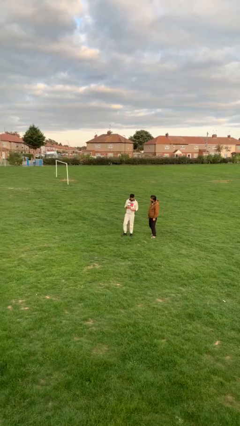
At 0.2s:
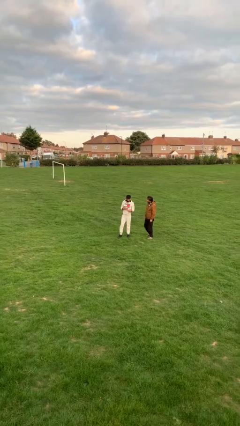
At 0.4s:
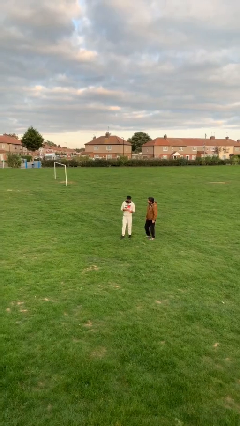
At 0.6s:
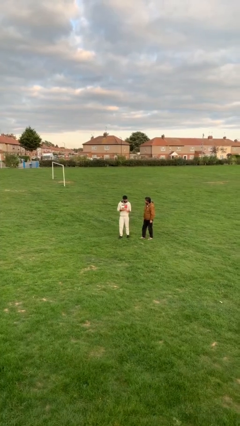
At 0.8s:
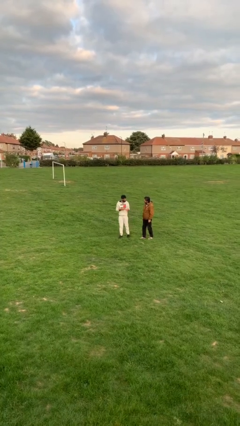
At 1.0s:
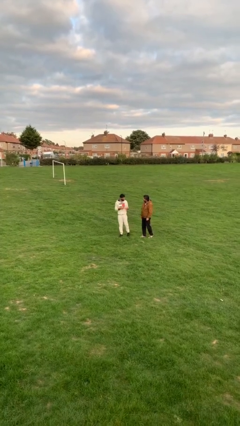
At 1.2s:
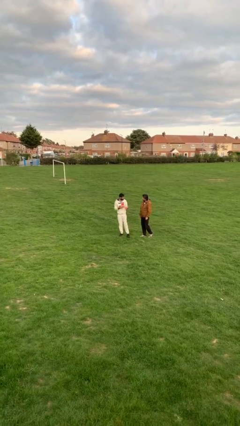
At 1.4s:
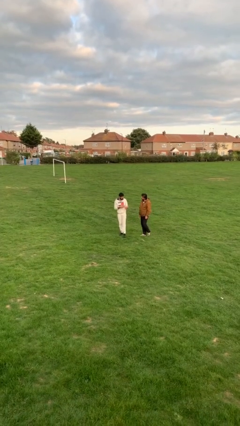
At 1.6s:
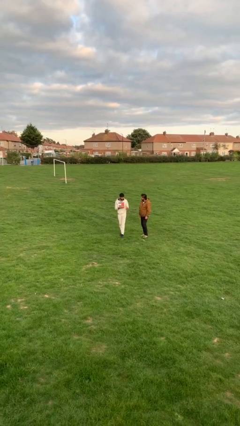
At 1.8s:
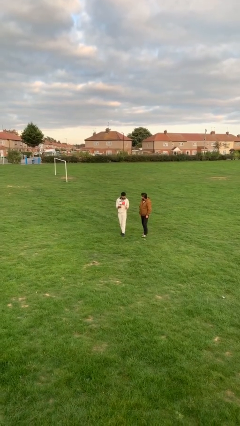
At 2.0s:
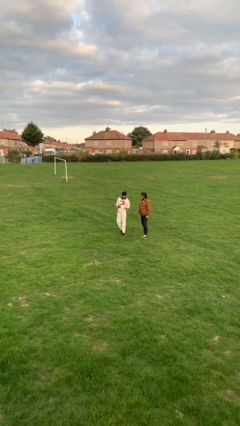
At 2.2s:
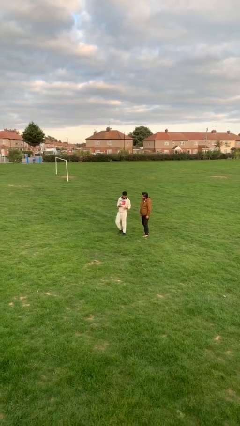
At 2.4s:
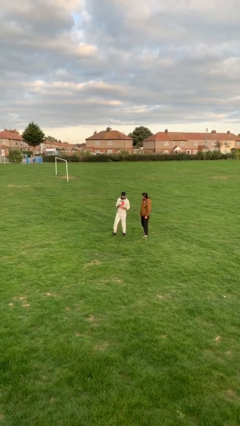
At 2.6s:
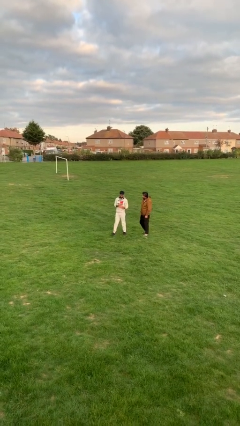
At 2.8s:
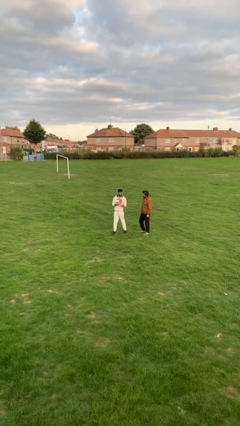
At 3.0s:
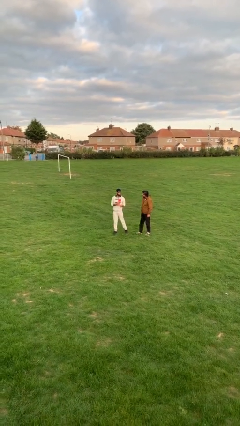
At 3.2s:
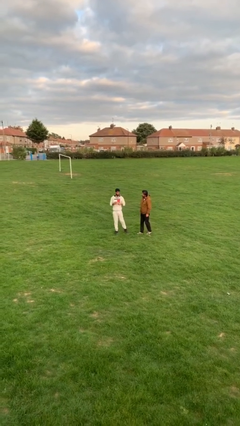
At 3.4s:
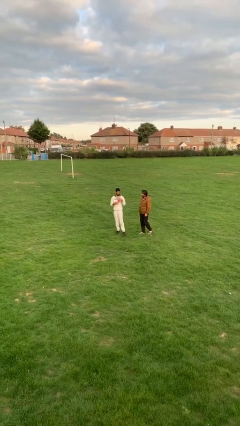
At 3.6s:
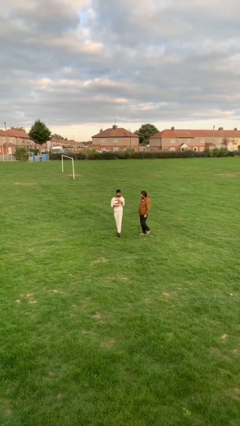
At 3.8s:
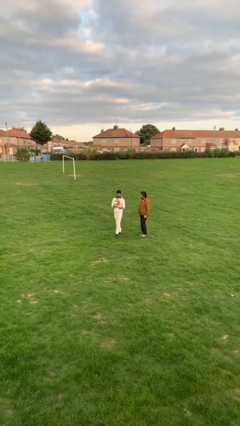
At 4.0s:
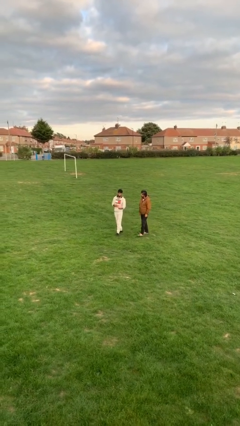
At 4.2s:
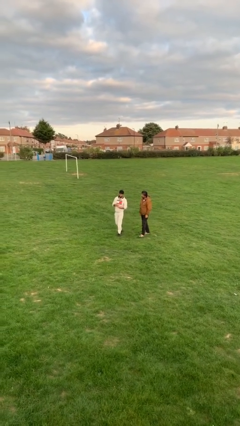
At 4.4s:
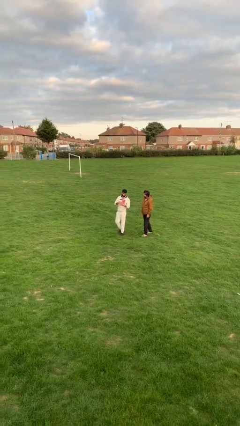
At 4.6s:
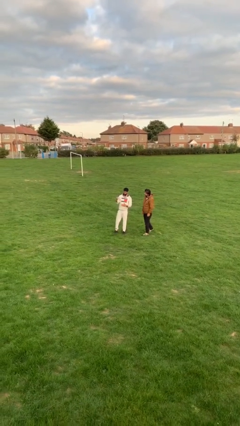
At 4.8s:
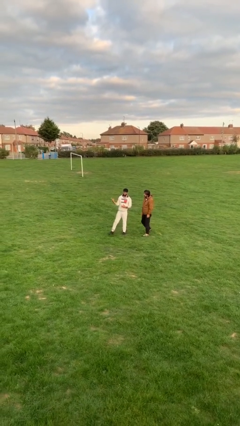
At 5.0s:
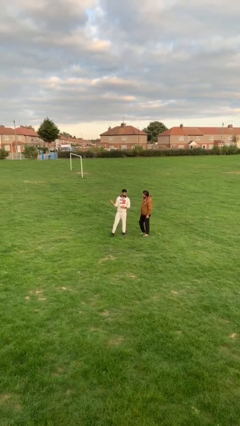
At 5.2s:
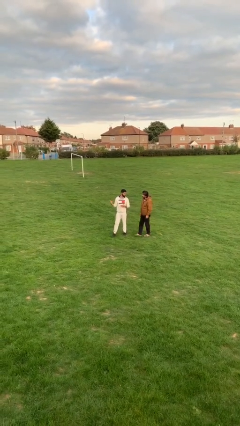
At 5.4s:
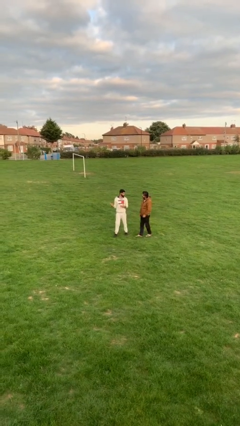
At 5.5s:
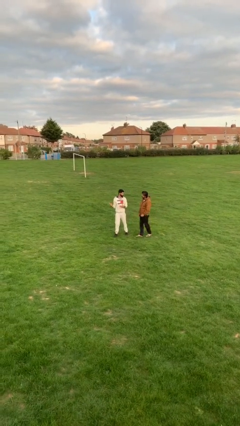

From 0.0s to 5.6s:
person talks to person

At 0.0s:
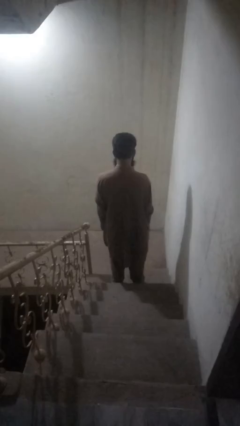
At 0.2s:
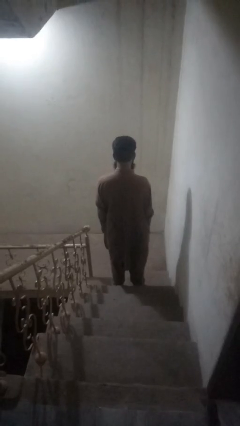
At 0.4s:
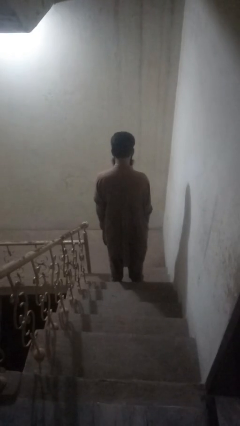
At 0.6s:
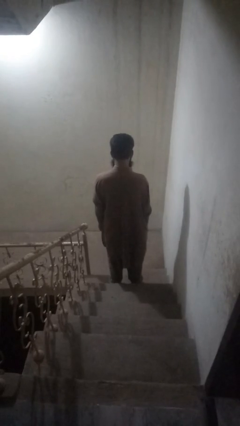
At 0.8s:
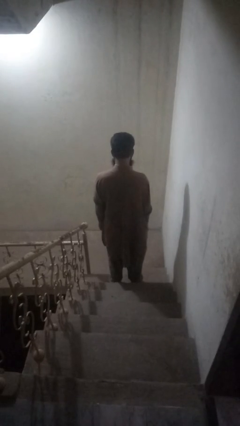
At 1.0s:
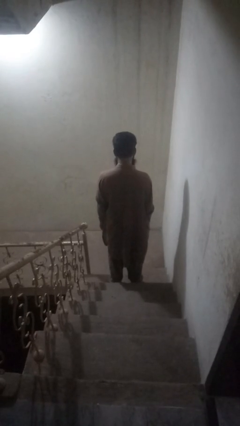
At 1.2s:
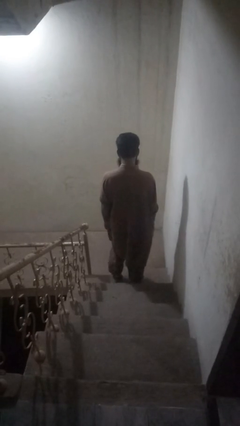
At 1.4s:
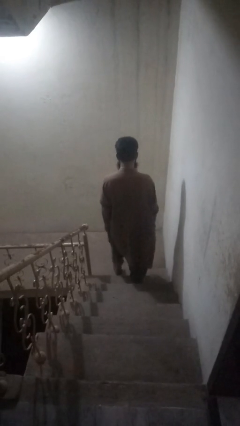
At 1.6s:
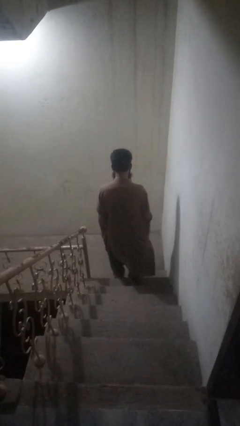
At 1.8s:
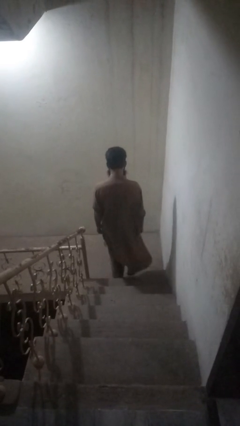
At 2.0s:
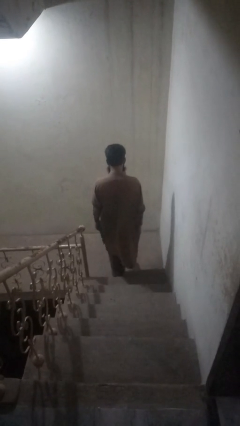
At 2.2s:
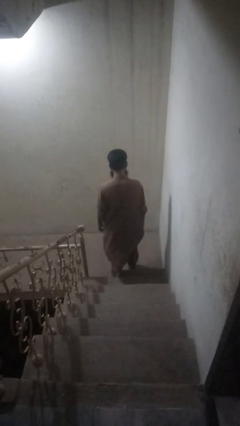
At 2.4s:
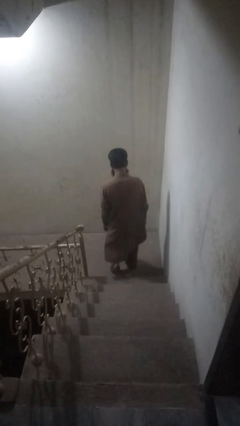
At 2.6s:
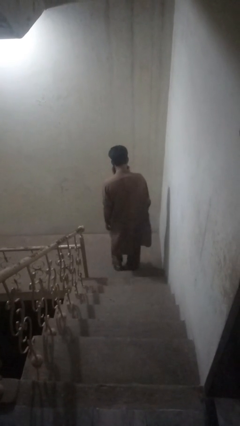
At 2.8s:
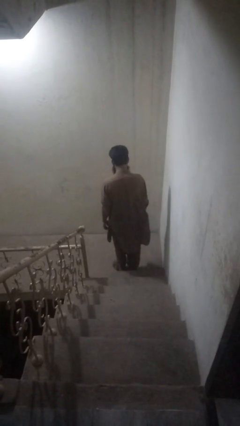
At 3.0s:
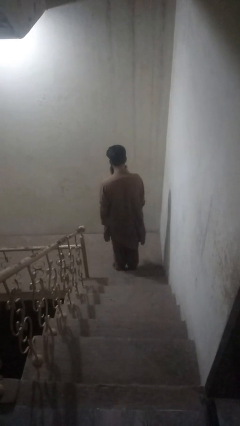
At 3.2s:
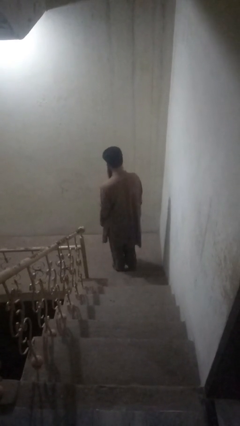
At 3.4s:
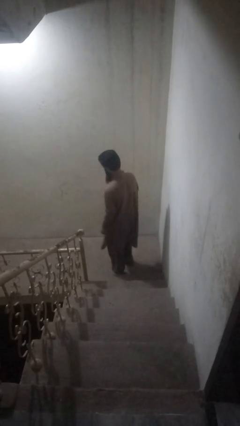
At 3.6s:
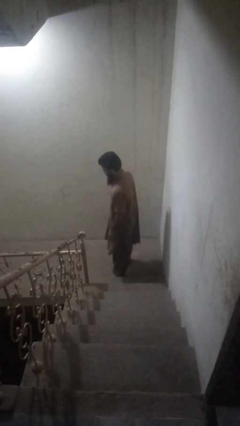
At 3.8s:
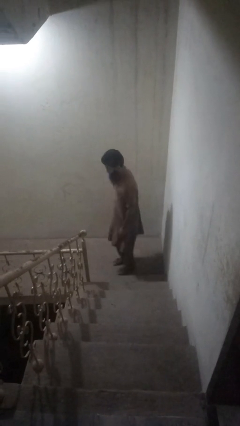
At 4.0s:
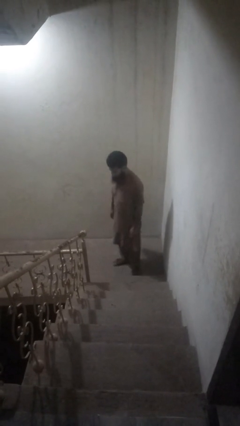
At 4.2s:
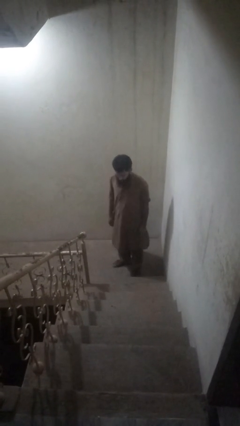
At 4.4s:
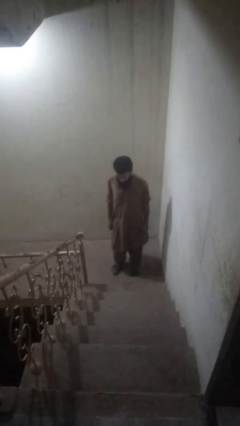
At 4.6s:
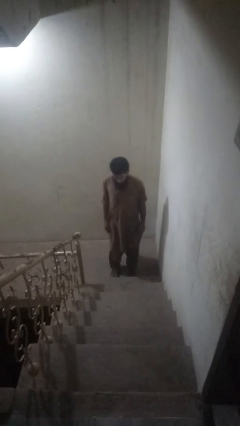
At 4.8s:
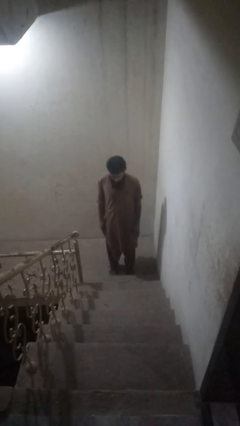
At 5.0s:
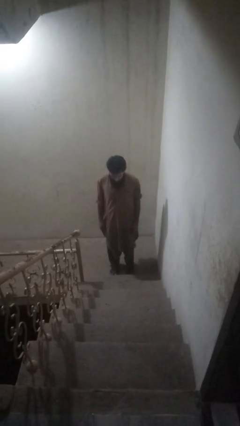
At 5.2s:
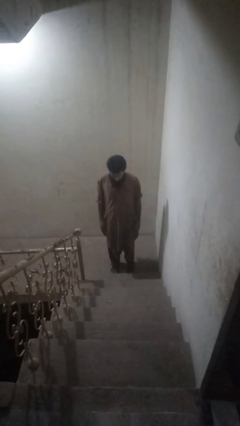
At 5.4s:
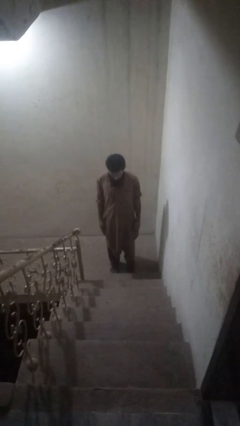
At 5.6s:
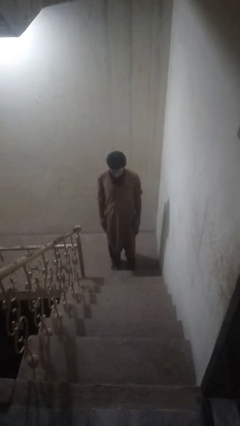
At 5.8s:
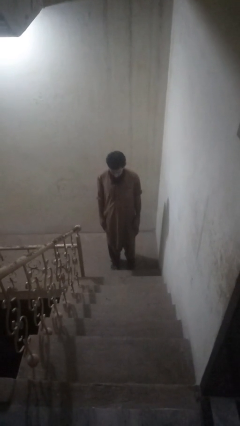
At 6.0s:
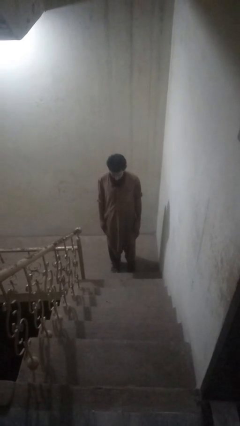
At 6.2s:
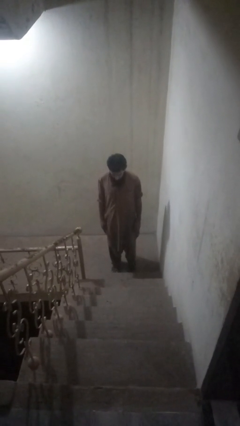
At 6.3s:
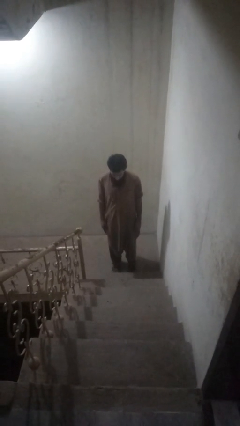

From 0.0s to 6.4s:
person climbs down stairs

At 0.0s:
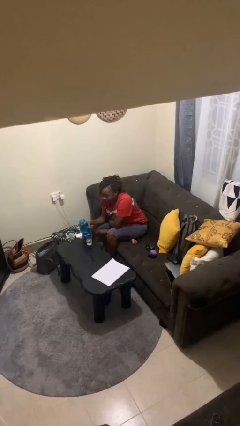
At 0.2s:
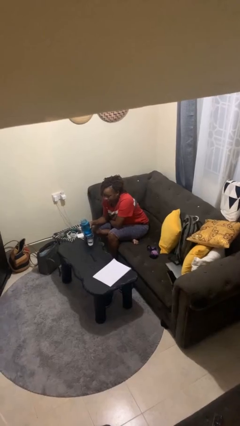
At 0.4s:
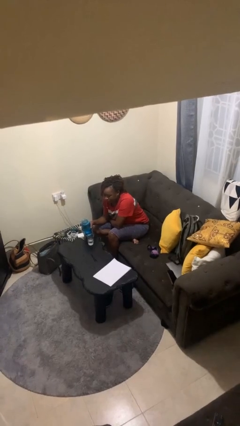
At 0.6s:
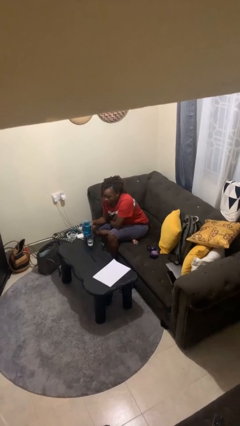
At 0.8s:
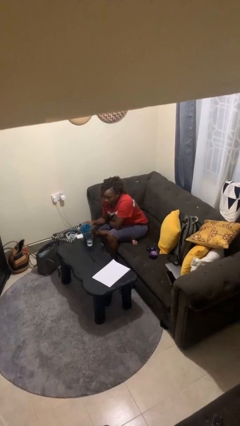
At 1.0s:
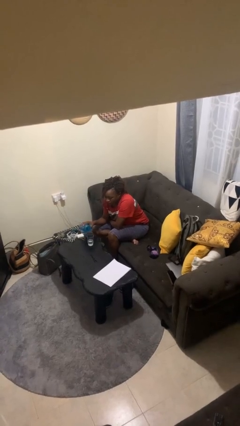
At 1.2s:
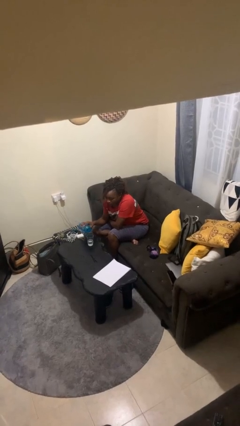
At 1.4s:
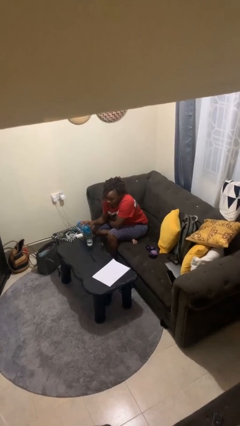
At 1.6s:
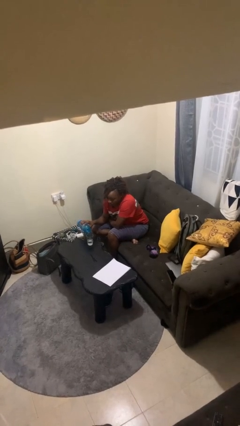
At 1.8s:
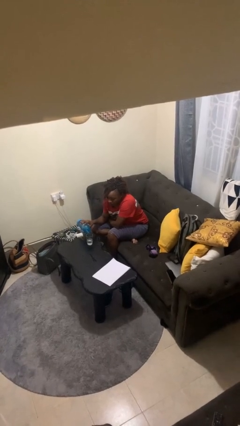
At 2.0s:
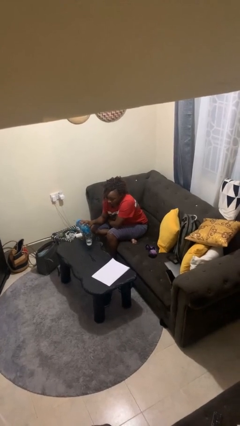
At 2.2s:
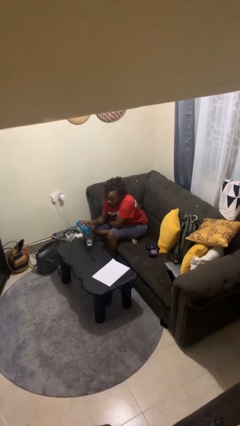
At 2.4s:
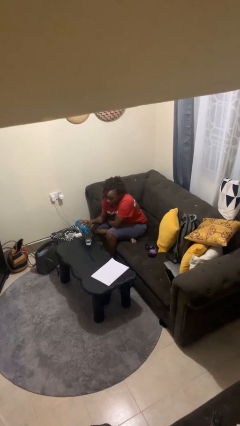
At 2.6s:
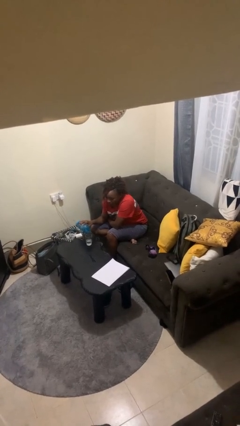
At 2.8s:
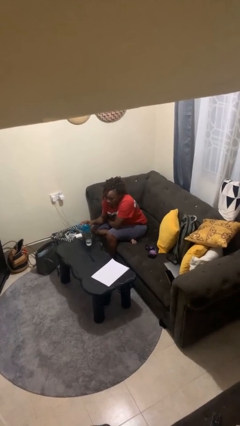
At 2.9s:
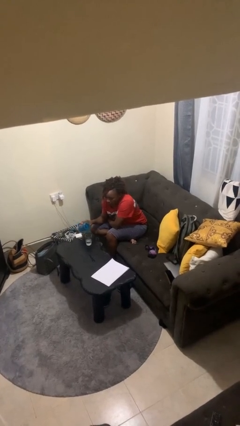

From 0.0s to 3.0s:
person pours liquid into cup

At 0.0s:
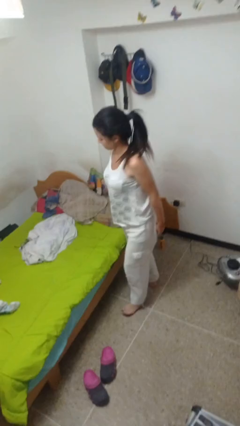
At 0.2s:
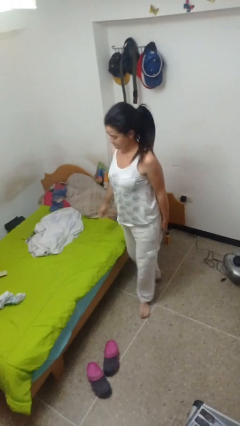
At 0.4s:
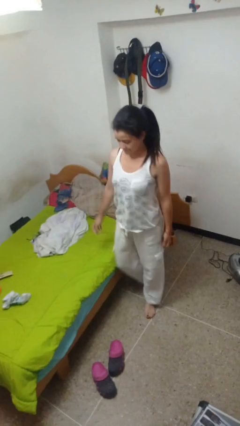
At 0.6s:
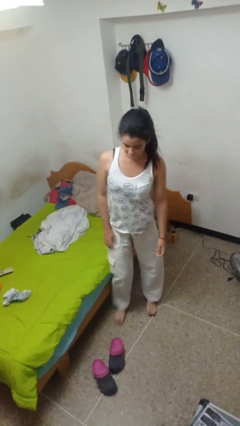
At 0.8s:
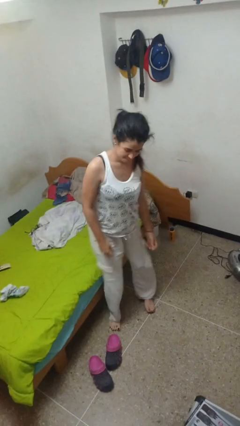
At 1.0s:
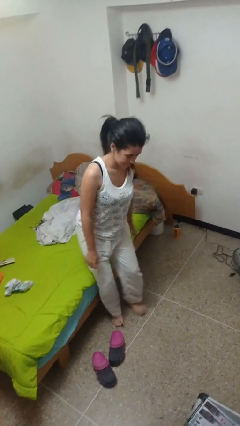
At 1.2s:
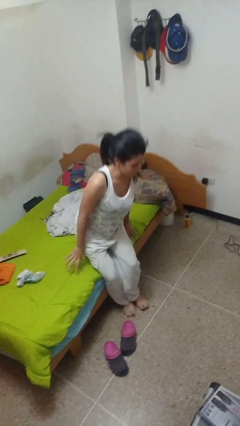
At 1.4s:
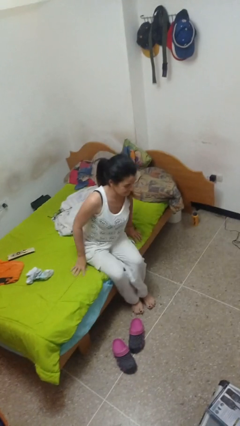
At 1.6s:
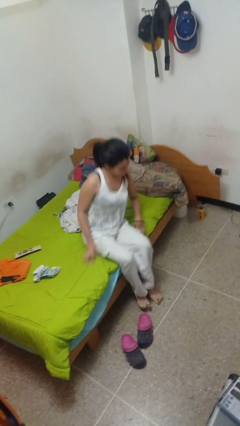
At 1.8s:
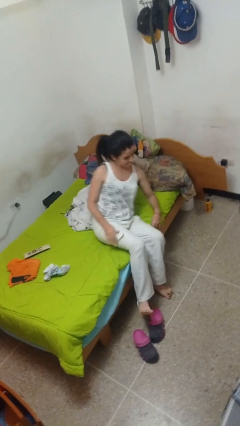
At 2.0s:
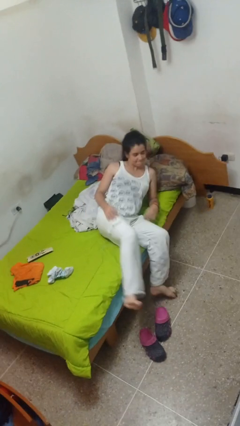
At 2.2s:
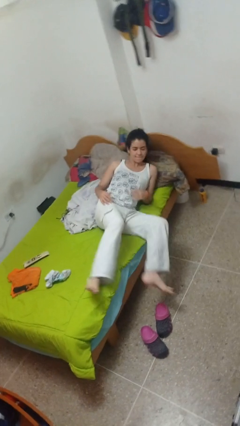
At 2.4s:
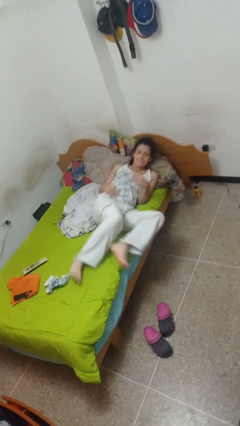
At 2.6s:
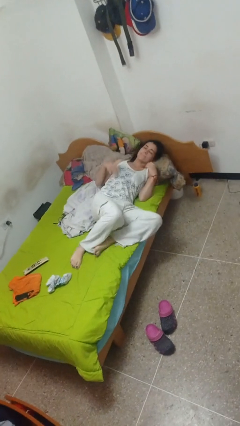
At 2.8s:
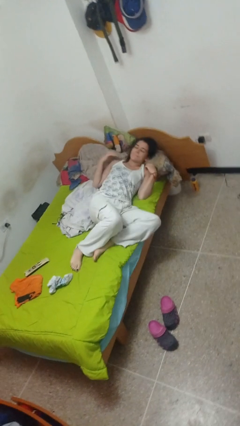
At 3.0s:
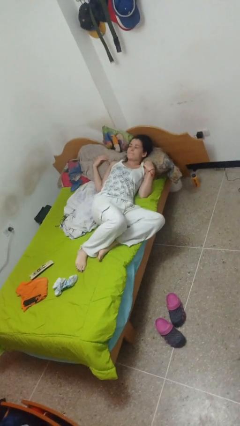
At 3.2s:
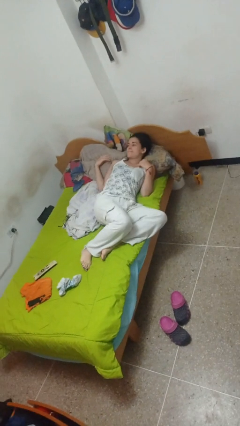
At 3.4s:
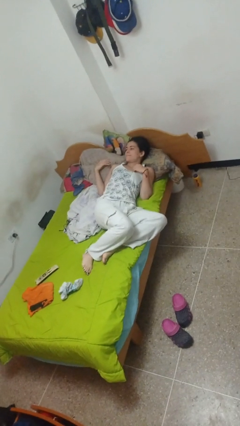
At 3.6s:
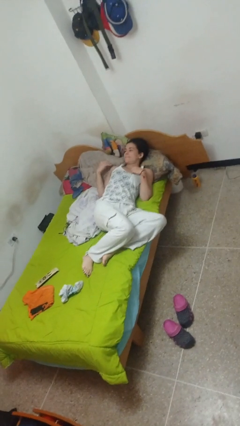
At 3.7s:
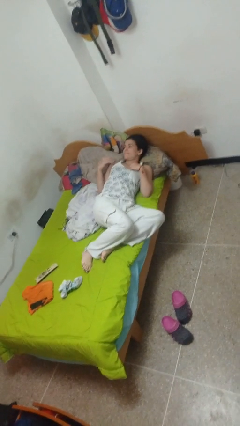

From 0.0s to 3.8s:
person lies down on bed
